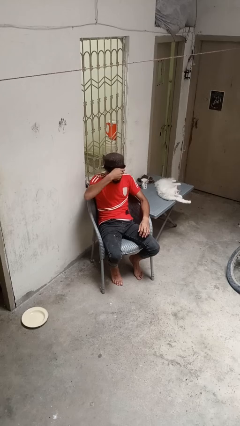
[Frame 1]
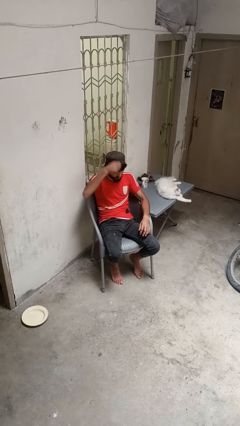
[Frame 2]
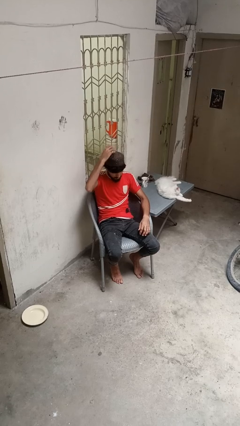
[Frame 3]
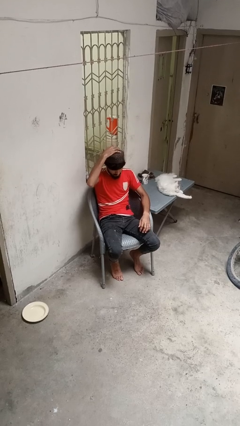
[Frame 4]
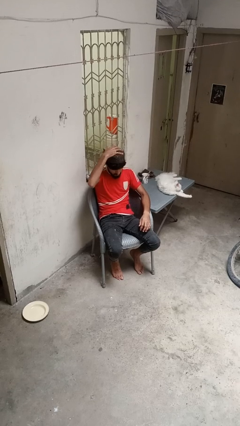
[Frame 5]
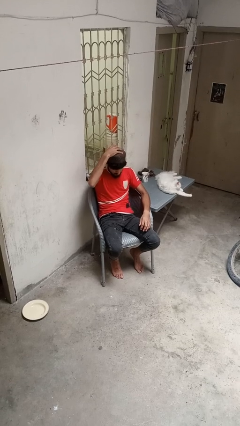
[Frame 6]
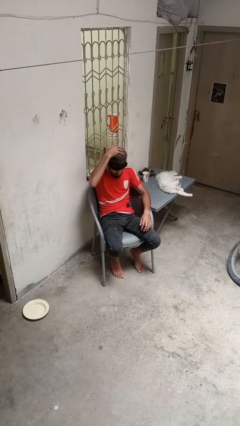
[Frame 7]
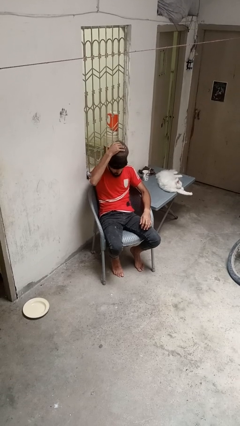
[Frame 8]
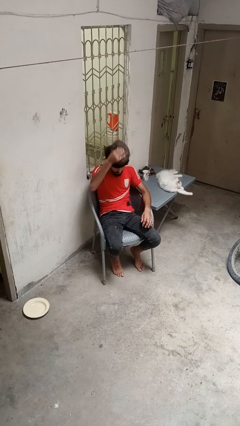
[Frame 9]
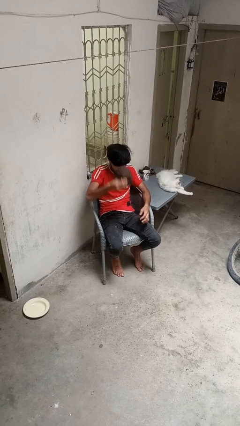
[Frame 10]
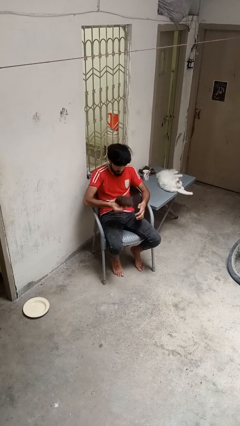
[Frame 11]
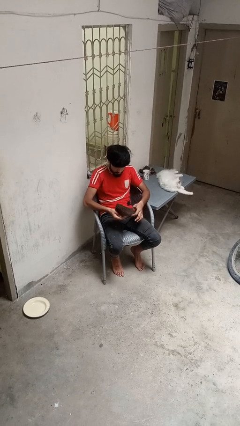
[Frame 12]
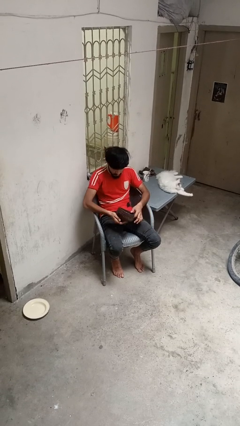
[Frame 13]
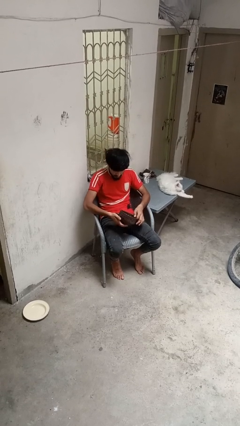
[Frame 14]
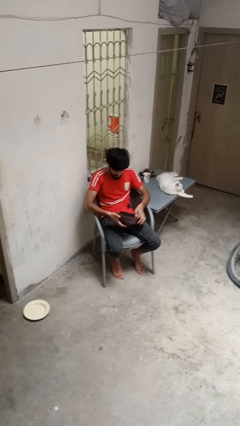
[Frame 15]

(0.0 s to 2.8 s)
person takes off hat

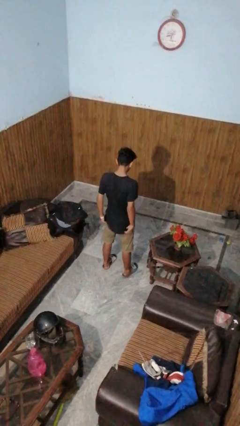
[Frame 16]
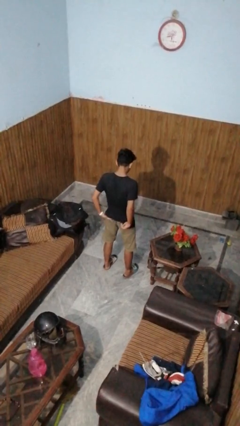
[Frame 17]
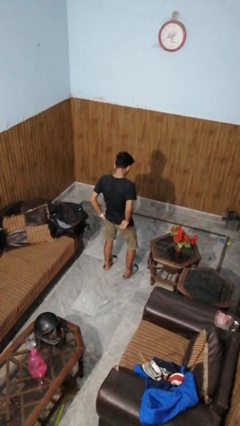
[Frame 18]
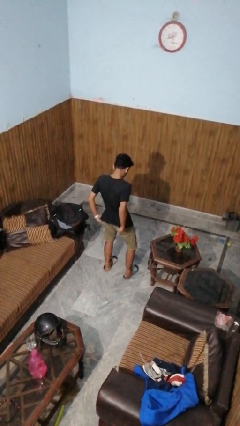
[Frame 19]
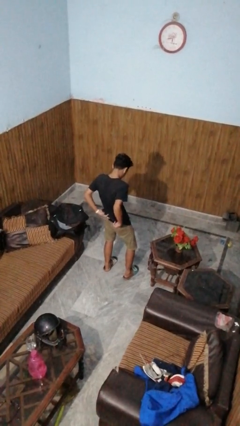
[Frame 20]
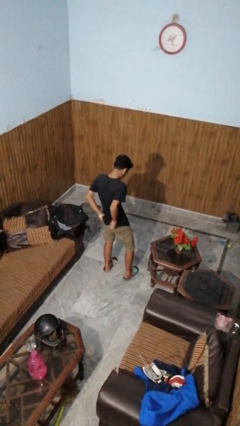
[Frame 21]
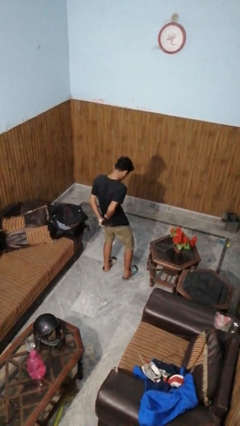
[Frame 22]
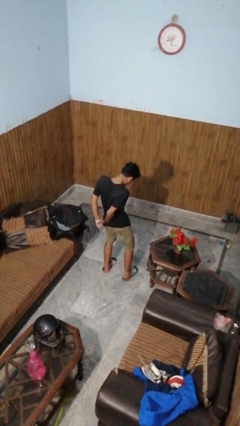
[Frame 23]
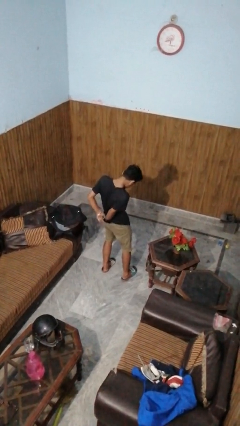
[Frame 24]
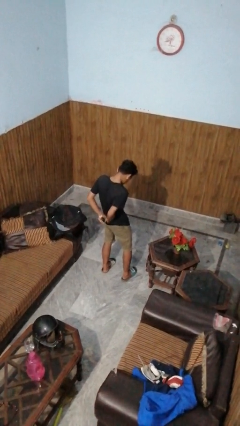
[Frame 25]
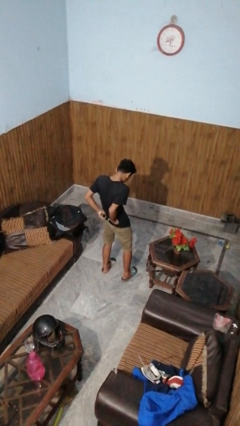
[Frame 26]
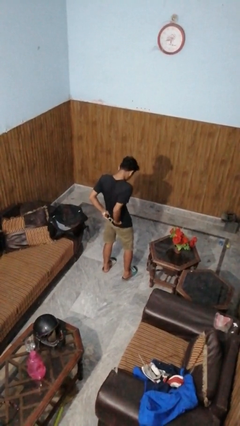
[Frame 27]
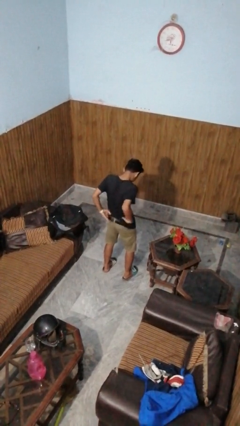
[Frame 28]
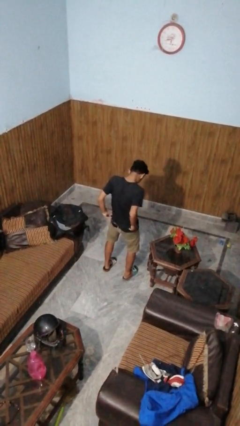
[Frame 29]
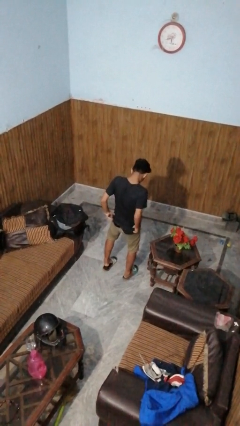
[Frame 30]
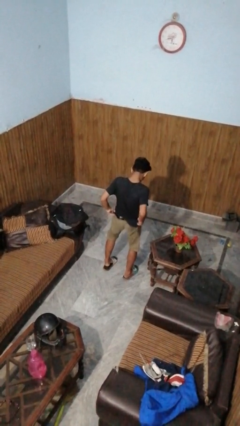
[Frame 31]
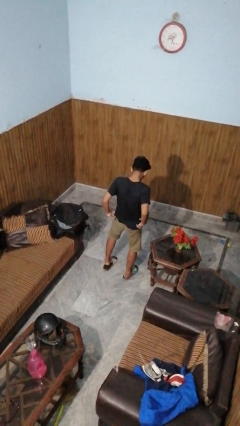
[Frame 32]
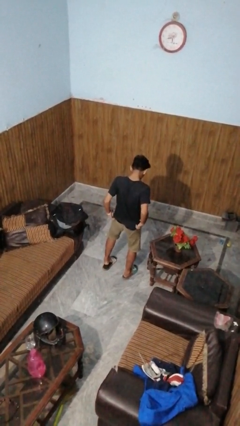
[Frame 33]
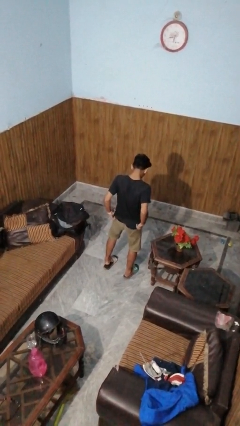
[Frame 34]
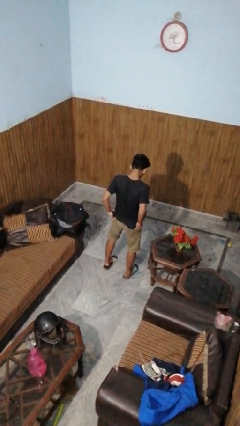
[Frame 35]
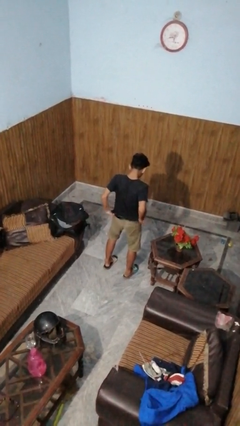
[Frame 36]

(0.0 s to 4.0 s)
person tucks in shirt

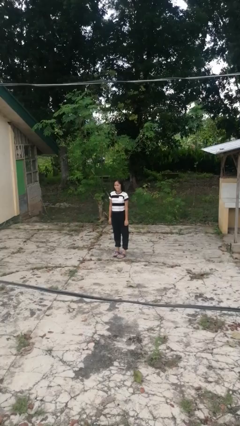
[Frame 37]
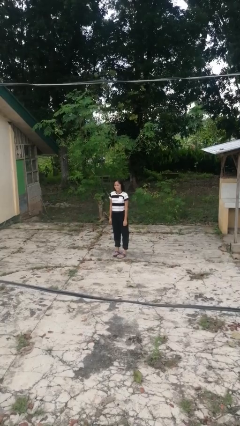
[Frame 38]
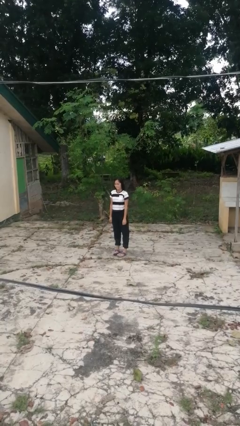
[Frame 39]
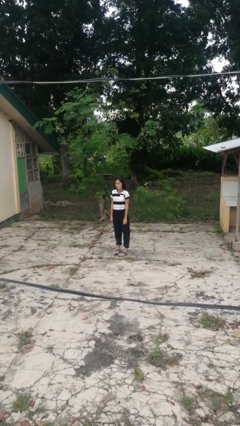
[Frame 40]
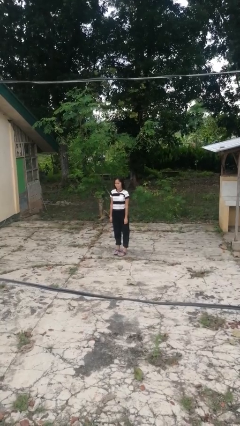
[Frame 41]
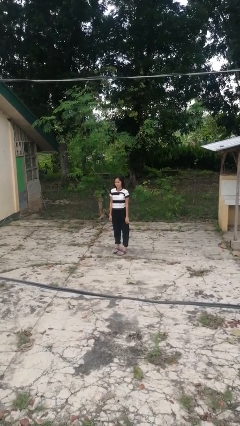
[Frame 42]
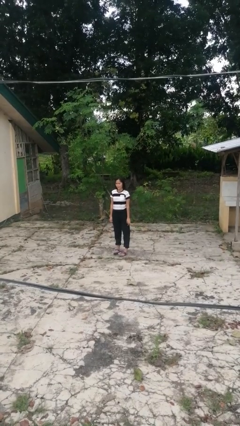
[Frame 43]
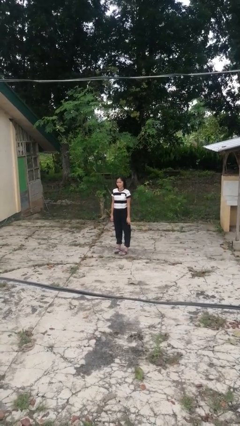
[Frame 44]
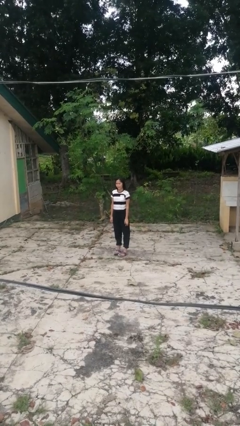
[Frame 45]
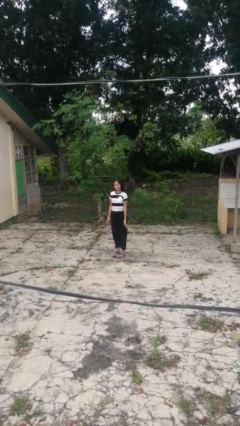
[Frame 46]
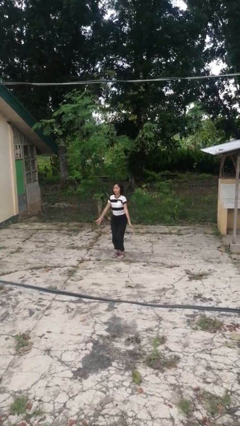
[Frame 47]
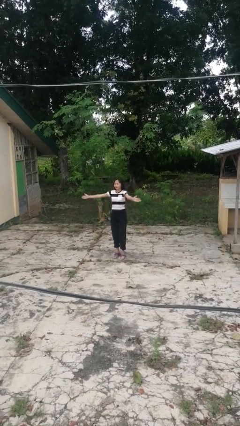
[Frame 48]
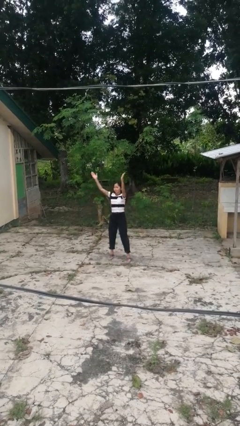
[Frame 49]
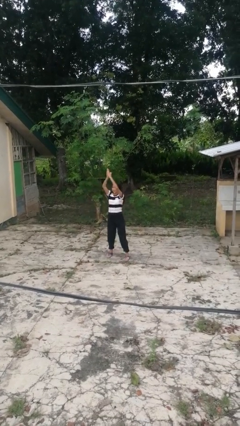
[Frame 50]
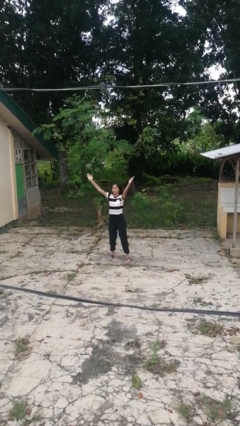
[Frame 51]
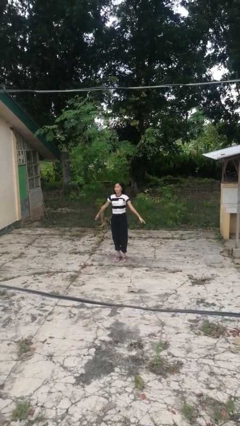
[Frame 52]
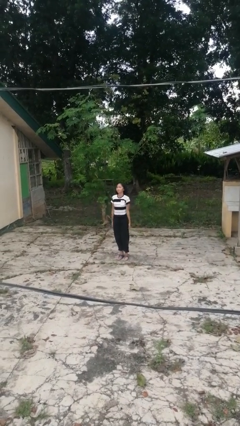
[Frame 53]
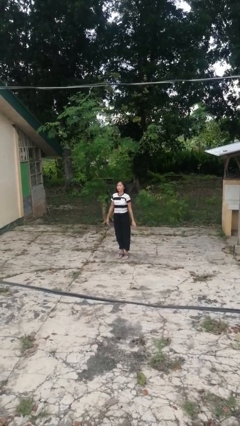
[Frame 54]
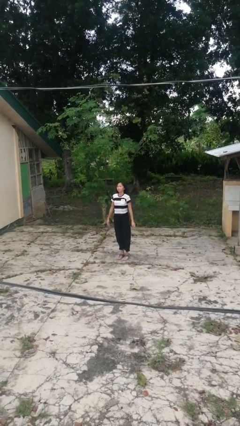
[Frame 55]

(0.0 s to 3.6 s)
person exercises with jumping jacks

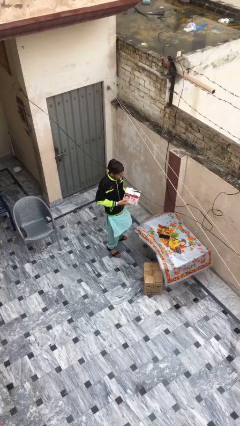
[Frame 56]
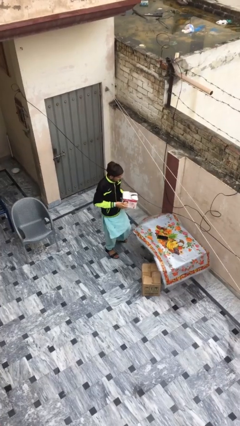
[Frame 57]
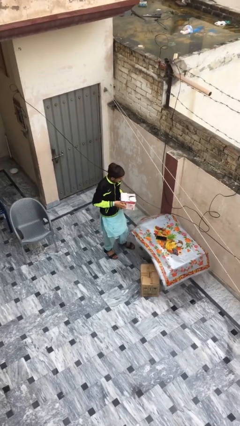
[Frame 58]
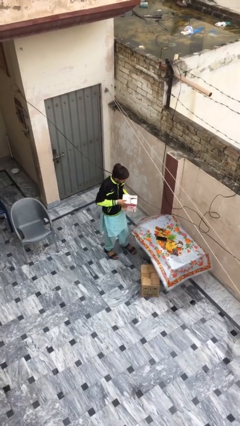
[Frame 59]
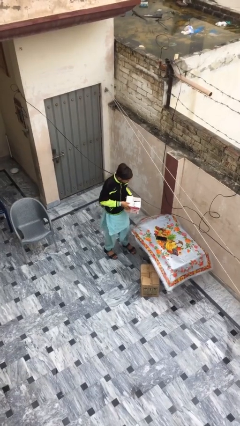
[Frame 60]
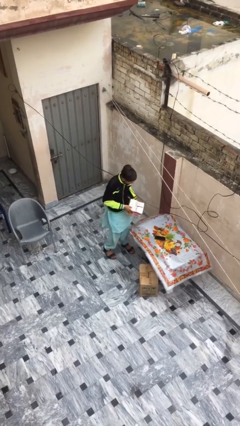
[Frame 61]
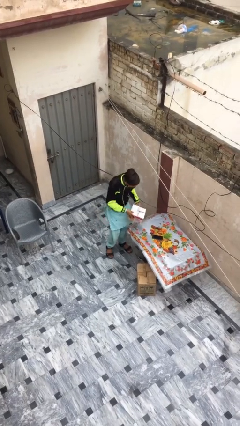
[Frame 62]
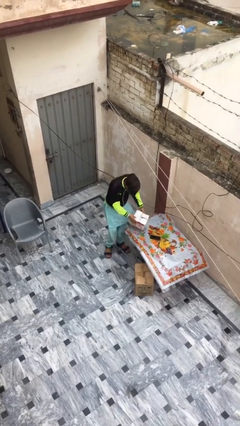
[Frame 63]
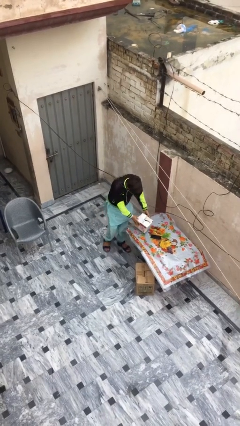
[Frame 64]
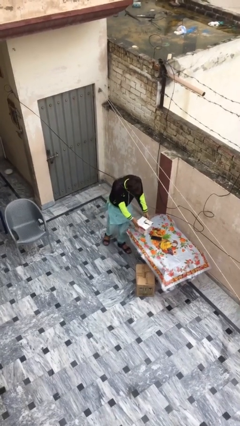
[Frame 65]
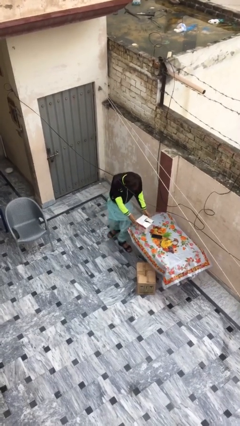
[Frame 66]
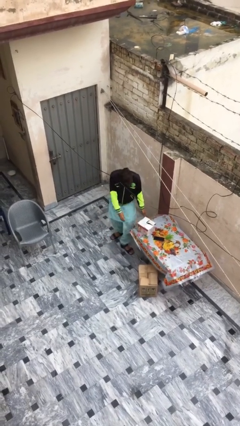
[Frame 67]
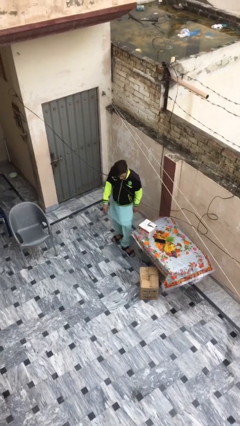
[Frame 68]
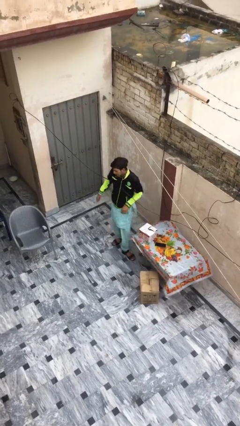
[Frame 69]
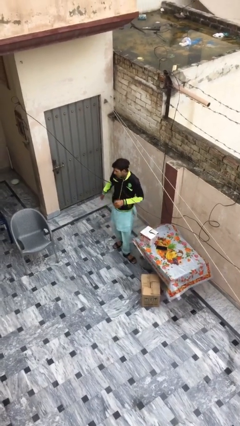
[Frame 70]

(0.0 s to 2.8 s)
person puts down object on table

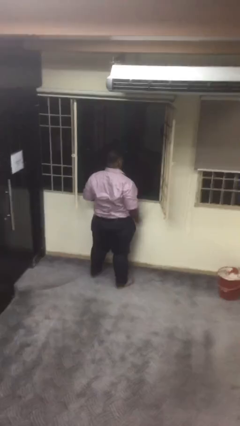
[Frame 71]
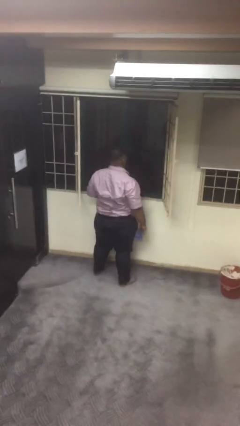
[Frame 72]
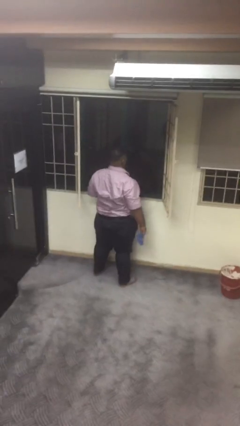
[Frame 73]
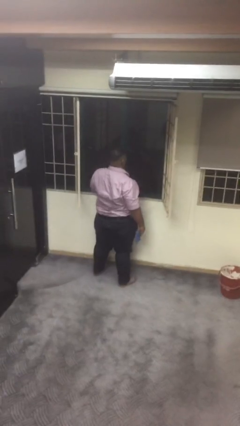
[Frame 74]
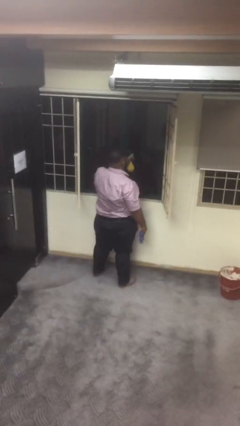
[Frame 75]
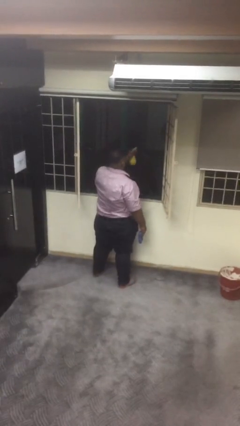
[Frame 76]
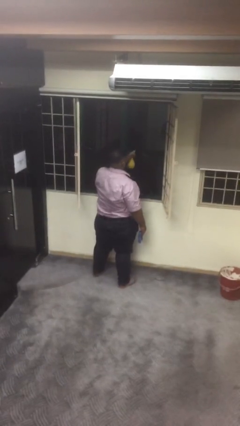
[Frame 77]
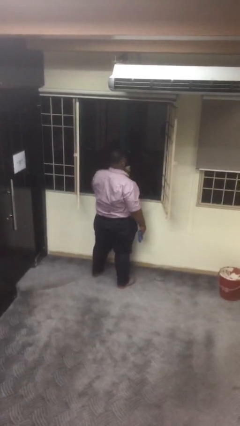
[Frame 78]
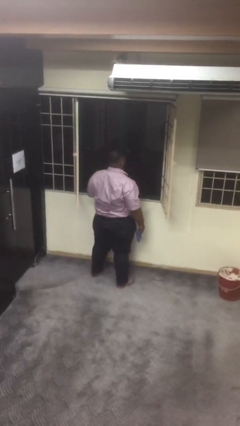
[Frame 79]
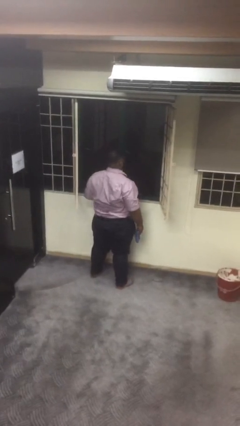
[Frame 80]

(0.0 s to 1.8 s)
person sprays from bottle

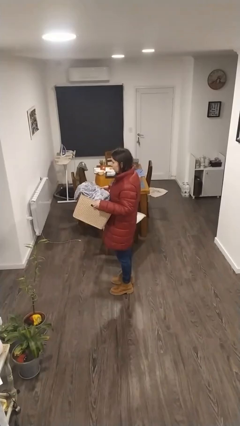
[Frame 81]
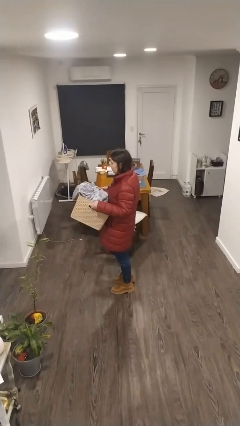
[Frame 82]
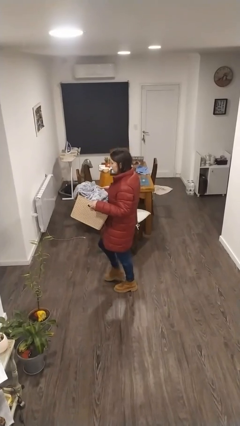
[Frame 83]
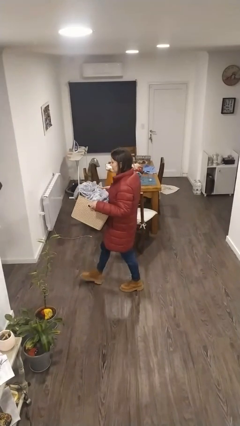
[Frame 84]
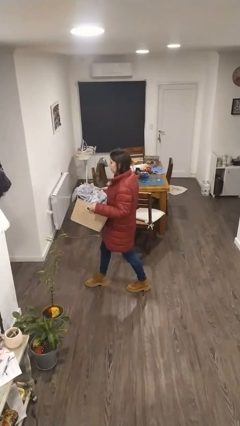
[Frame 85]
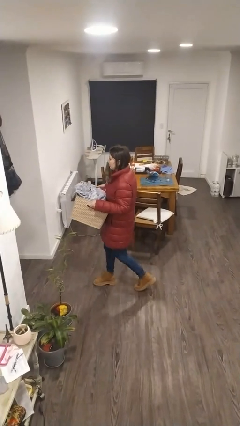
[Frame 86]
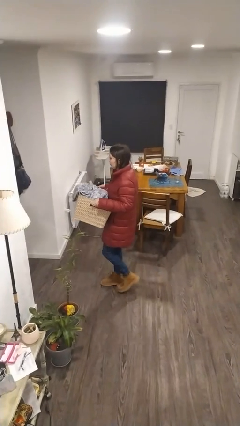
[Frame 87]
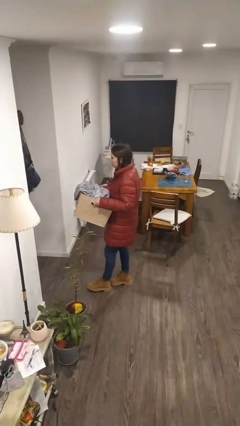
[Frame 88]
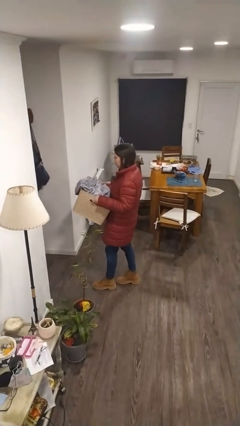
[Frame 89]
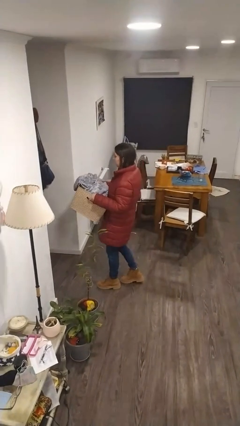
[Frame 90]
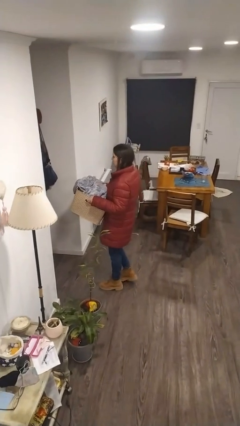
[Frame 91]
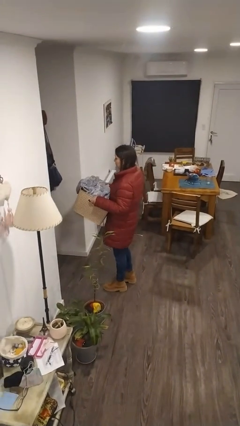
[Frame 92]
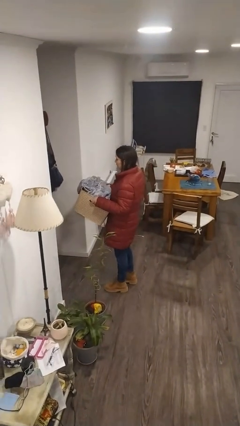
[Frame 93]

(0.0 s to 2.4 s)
person carries laundry basket
